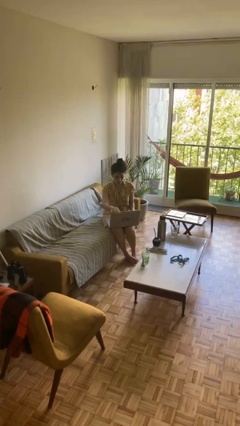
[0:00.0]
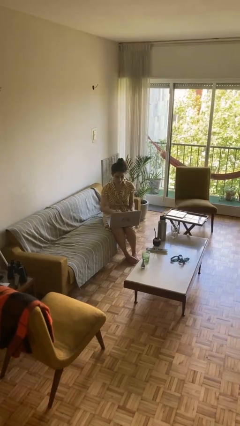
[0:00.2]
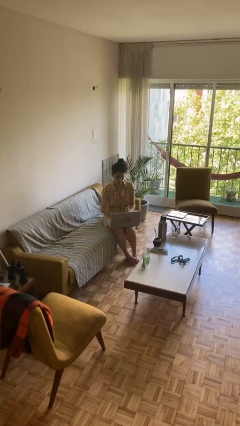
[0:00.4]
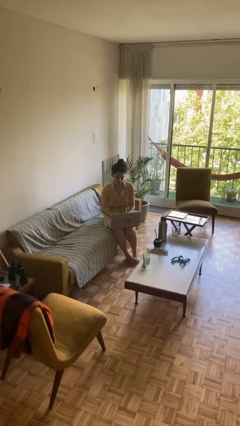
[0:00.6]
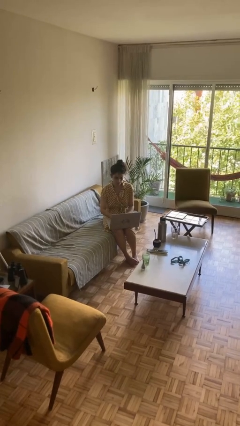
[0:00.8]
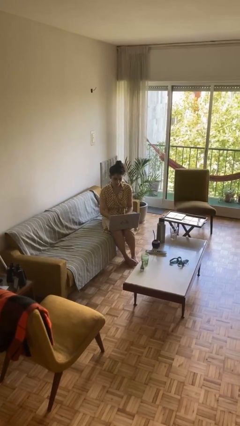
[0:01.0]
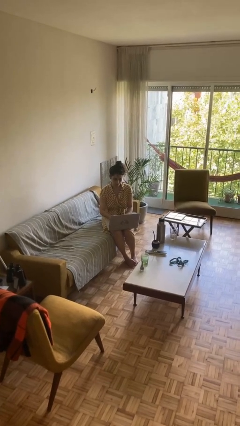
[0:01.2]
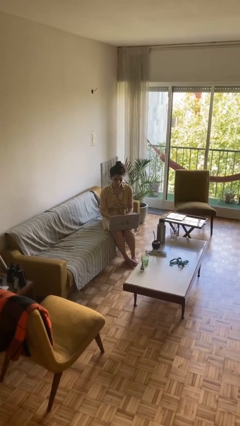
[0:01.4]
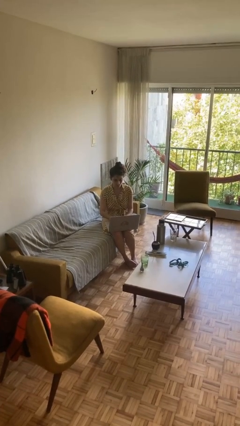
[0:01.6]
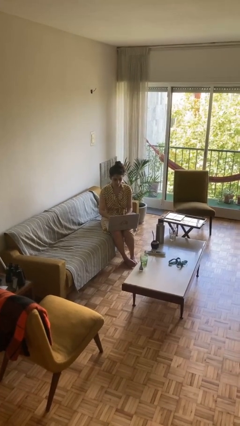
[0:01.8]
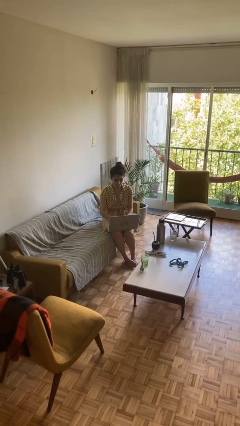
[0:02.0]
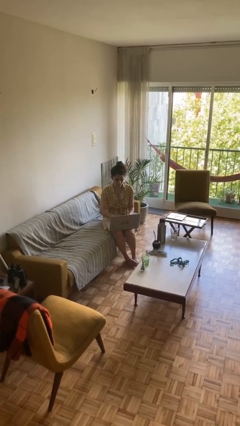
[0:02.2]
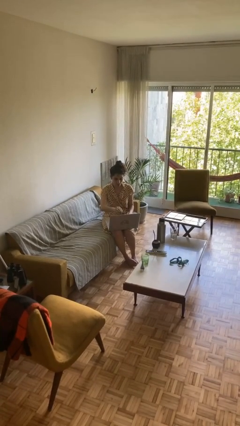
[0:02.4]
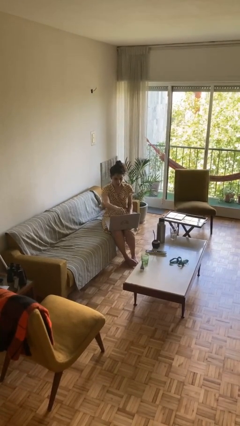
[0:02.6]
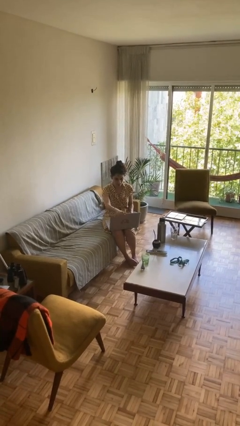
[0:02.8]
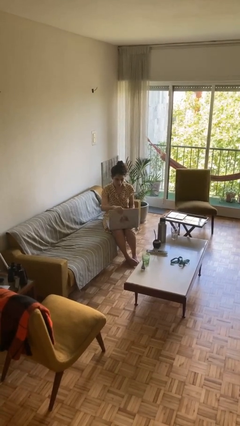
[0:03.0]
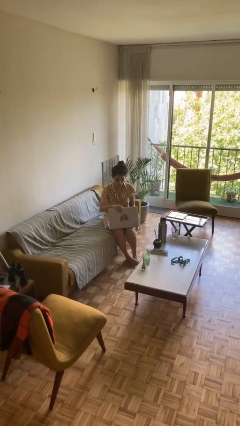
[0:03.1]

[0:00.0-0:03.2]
person interacts with laptop

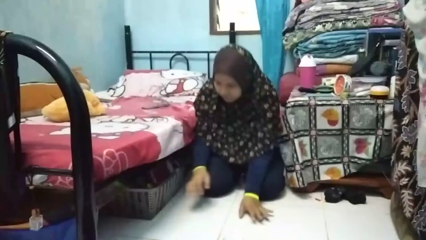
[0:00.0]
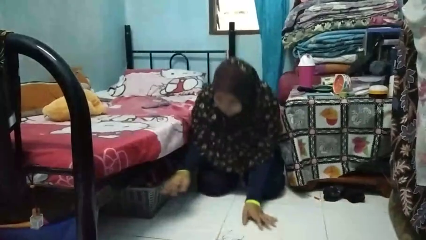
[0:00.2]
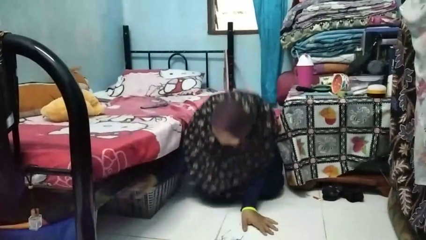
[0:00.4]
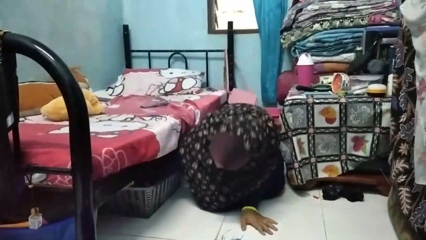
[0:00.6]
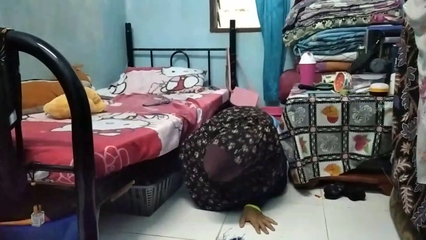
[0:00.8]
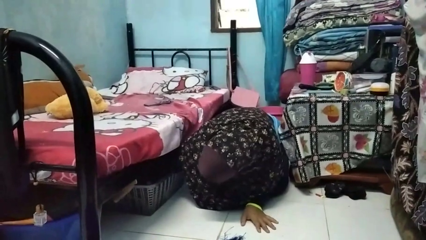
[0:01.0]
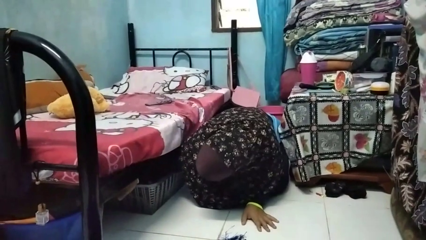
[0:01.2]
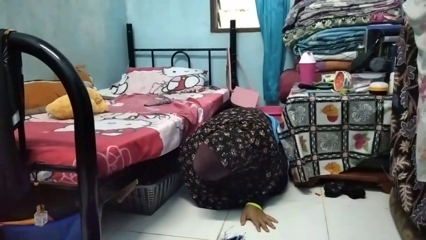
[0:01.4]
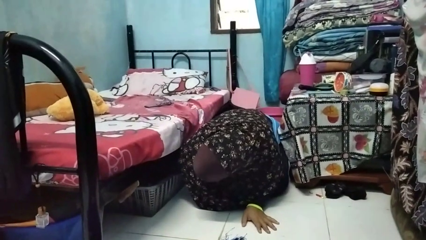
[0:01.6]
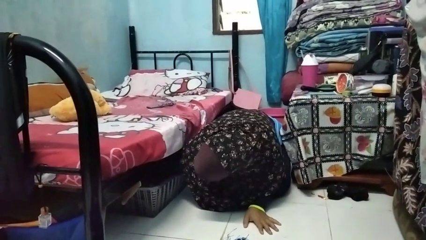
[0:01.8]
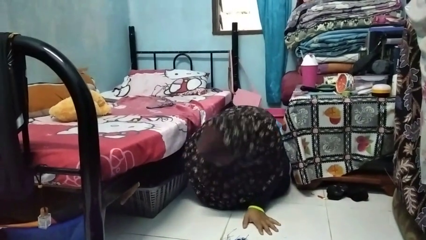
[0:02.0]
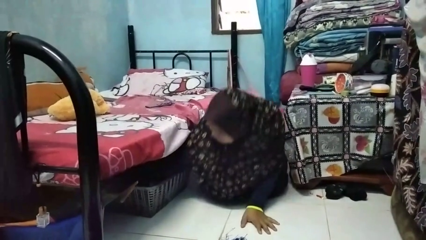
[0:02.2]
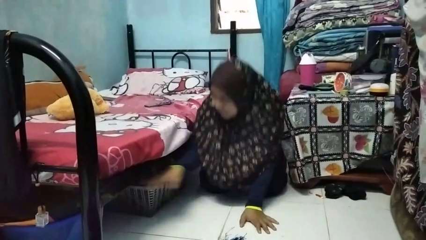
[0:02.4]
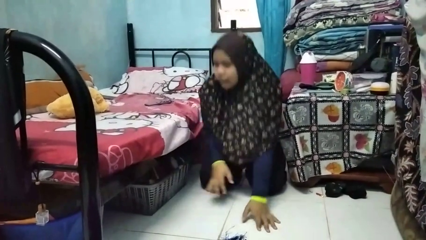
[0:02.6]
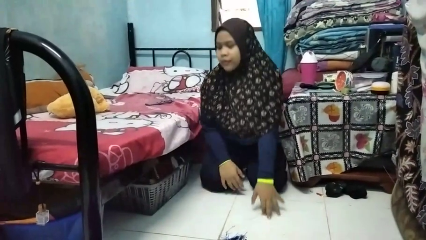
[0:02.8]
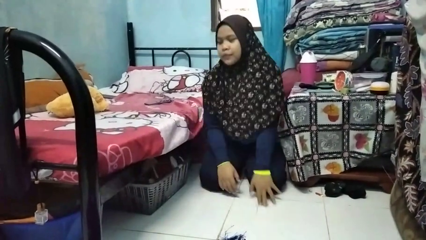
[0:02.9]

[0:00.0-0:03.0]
person searches under bed

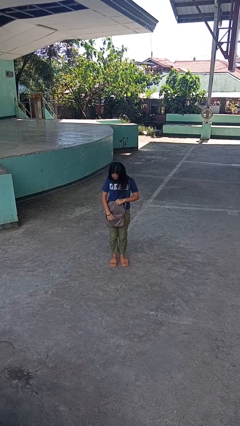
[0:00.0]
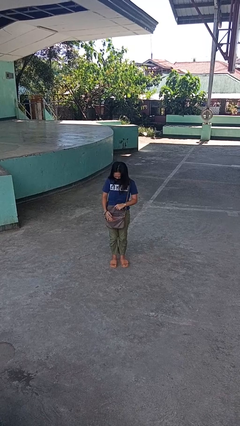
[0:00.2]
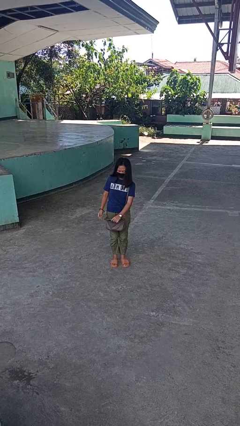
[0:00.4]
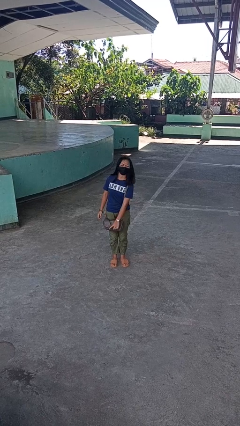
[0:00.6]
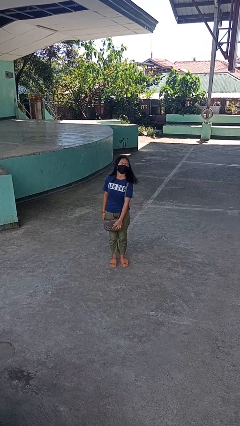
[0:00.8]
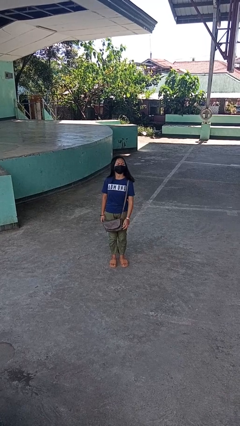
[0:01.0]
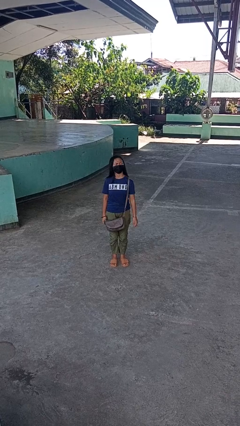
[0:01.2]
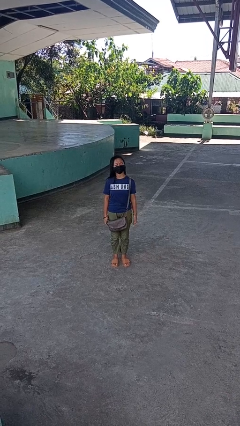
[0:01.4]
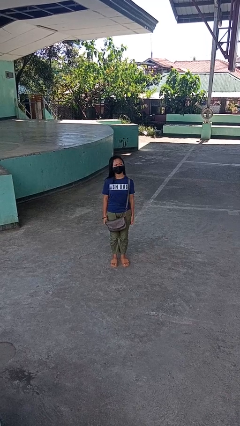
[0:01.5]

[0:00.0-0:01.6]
person puts object into purse

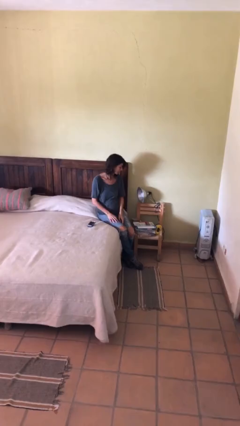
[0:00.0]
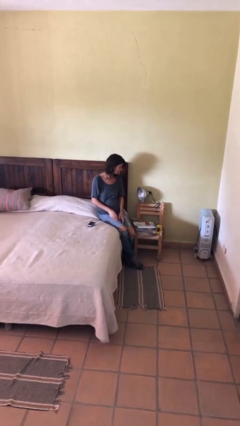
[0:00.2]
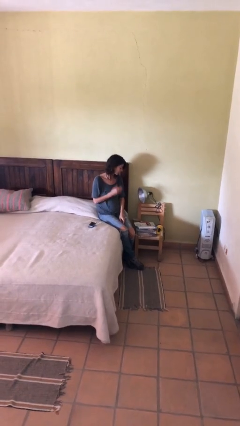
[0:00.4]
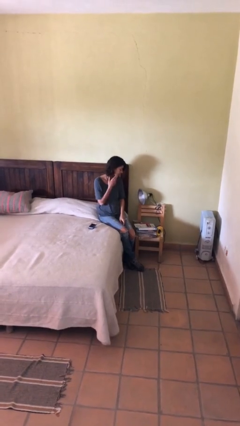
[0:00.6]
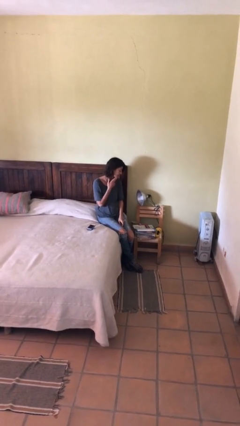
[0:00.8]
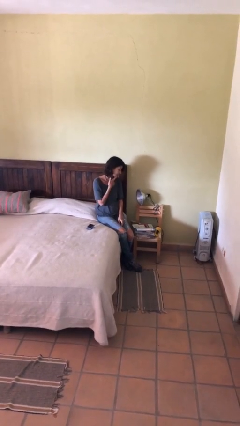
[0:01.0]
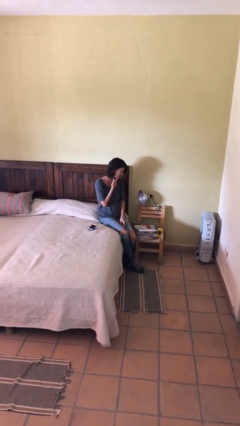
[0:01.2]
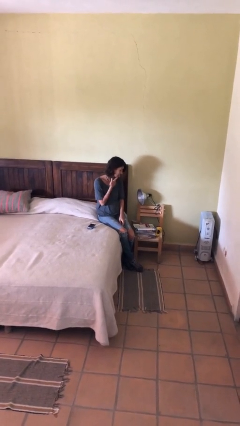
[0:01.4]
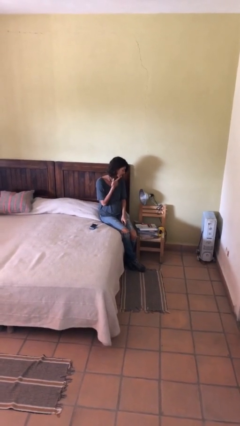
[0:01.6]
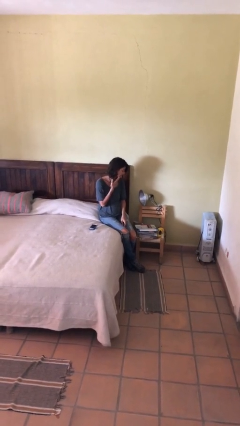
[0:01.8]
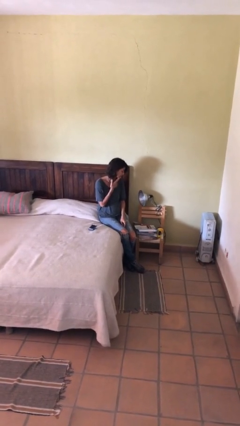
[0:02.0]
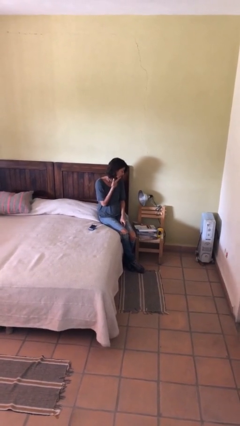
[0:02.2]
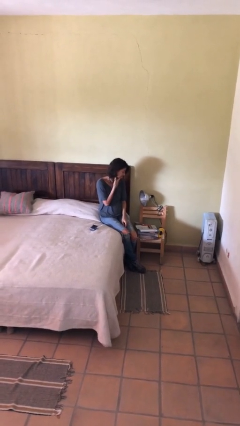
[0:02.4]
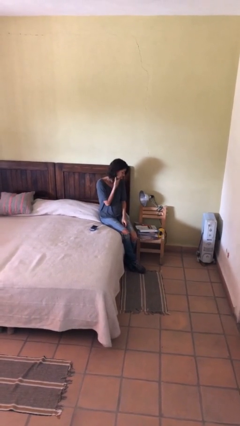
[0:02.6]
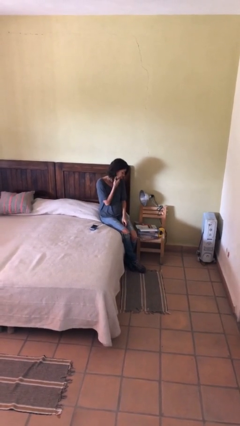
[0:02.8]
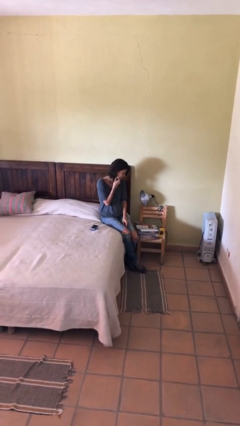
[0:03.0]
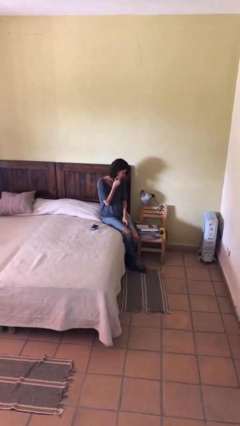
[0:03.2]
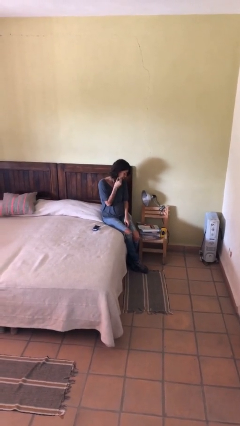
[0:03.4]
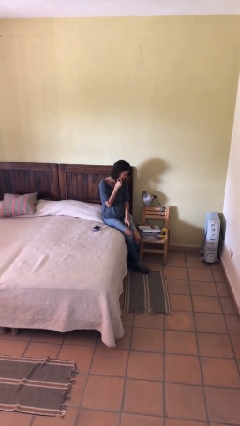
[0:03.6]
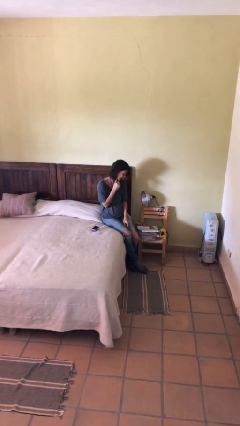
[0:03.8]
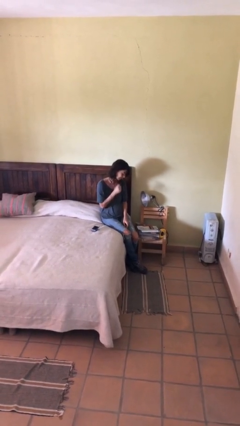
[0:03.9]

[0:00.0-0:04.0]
person strokes chin

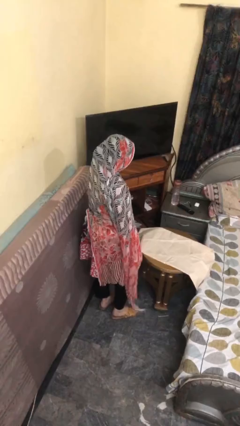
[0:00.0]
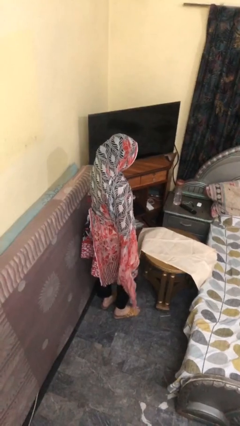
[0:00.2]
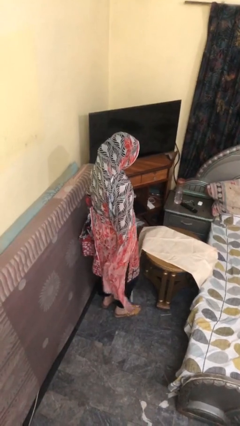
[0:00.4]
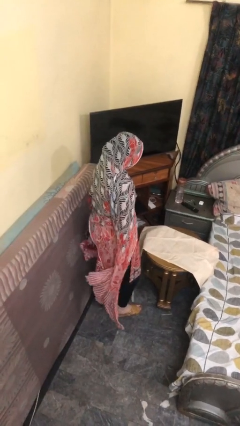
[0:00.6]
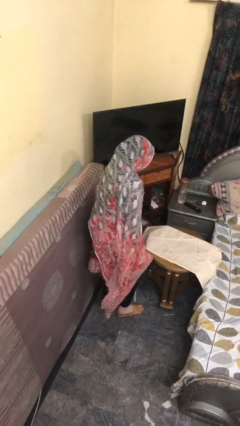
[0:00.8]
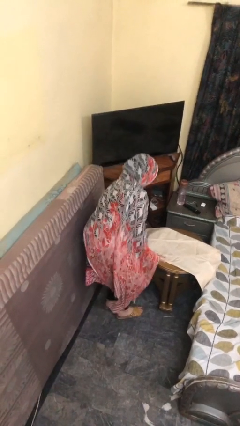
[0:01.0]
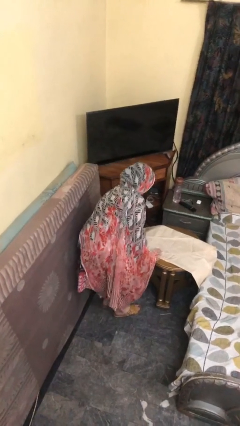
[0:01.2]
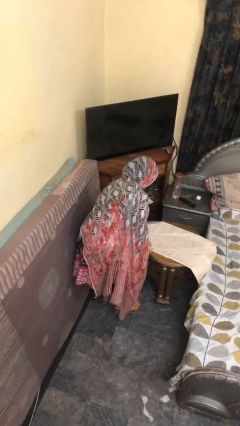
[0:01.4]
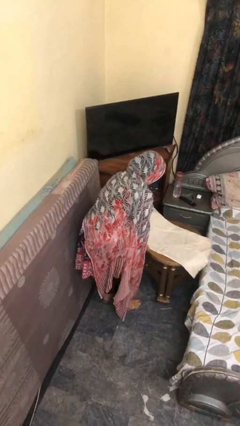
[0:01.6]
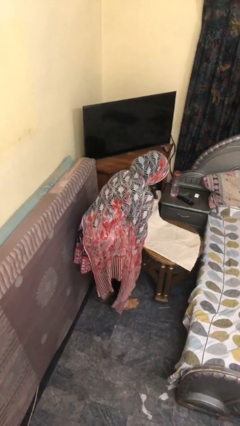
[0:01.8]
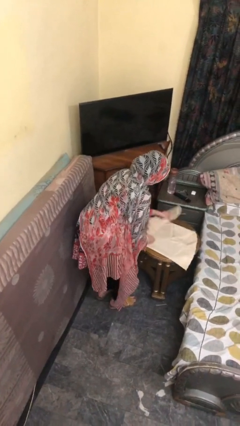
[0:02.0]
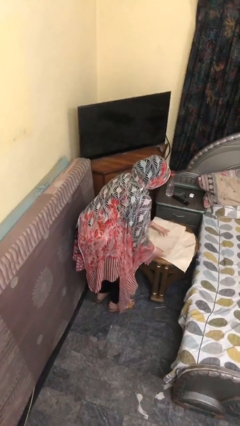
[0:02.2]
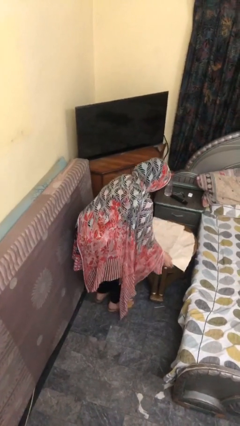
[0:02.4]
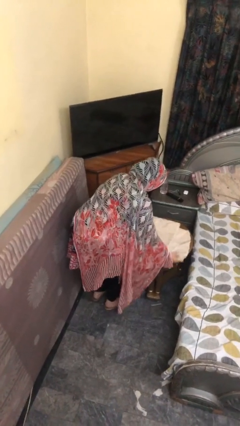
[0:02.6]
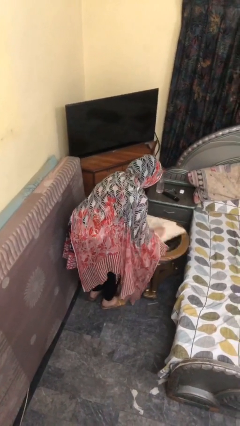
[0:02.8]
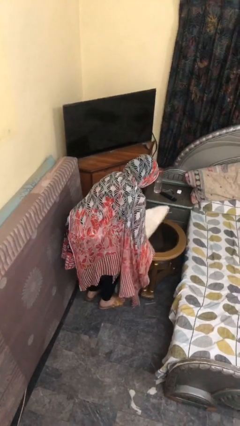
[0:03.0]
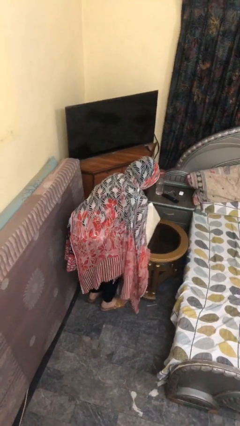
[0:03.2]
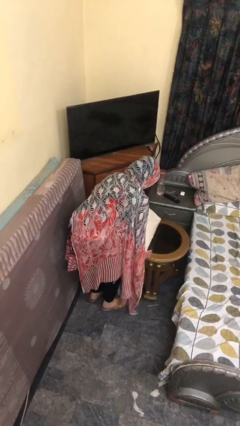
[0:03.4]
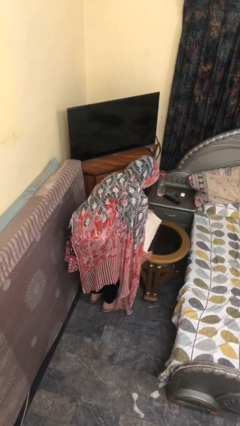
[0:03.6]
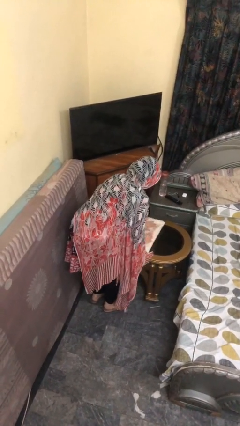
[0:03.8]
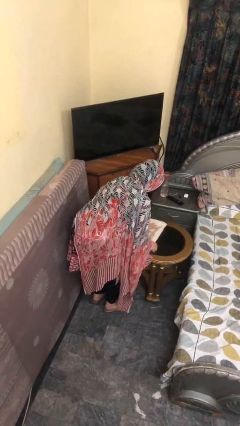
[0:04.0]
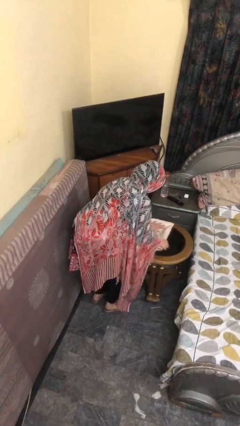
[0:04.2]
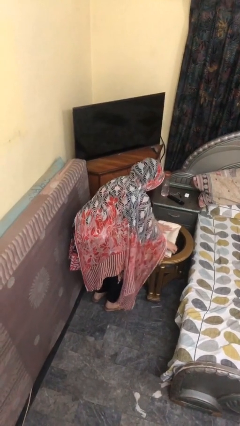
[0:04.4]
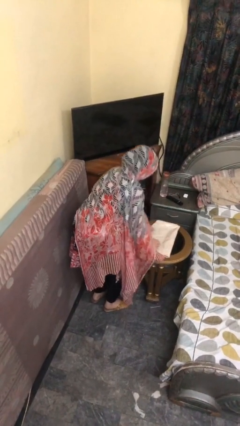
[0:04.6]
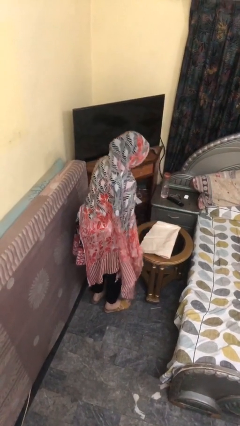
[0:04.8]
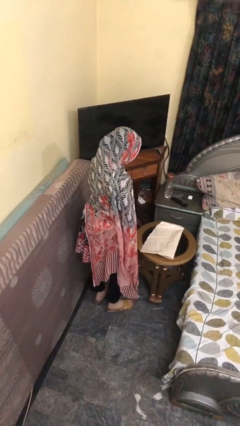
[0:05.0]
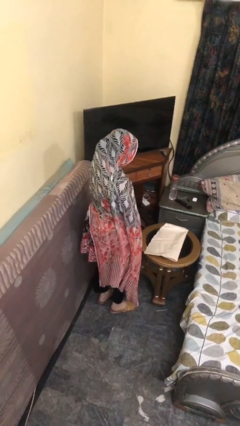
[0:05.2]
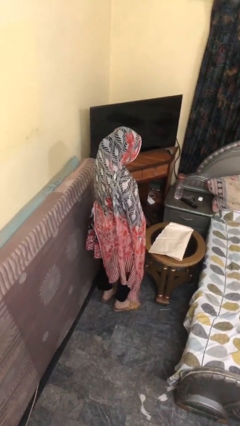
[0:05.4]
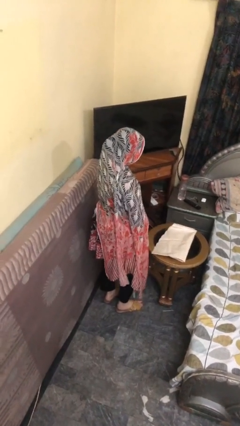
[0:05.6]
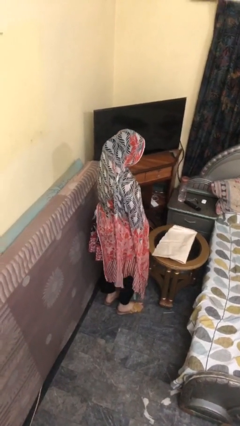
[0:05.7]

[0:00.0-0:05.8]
person folds tablecloth
